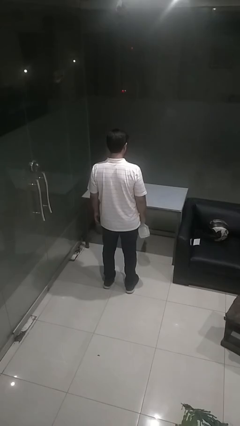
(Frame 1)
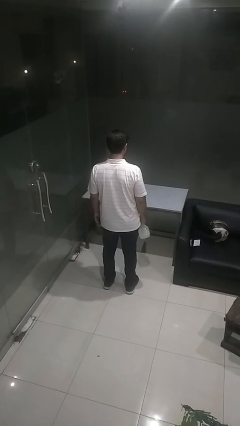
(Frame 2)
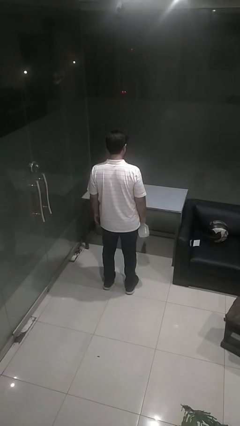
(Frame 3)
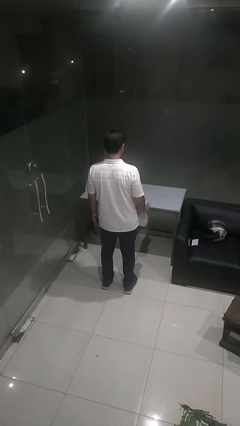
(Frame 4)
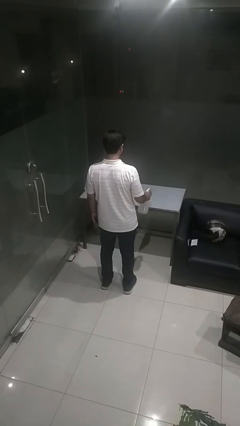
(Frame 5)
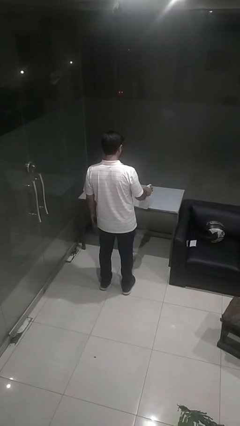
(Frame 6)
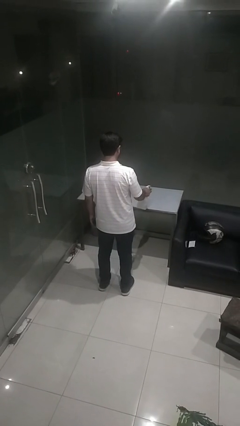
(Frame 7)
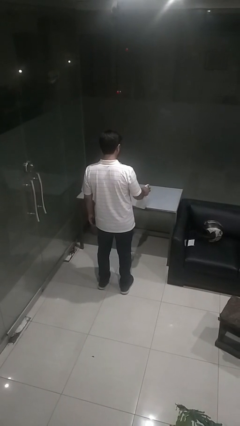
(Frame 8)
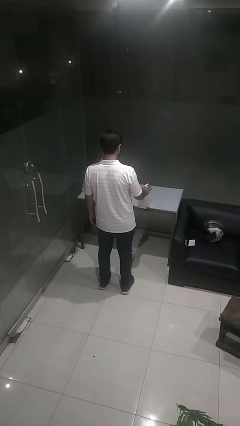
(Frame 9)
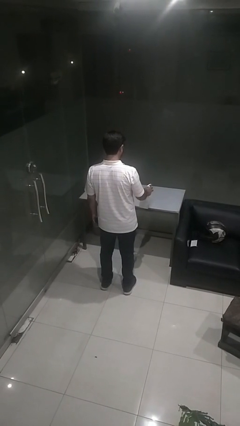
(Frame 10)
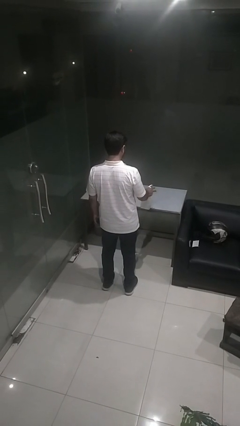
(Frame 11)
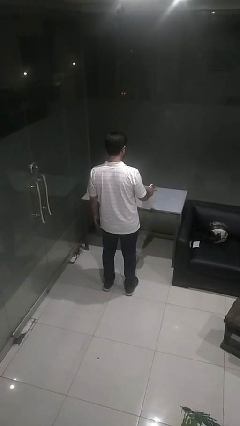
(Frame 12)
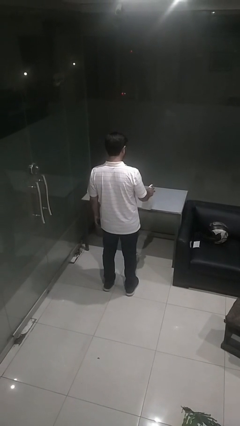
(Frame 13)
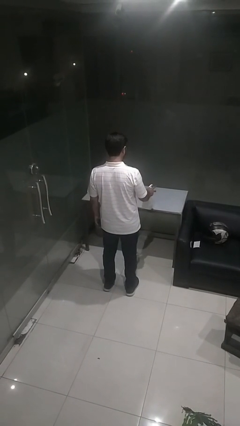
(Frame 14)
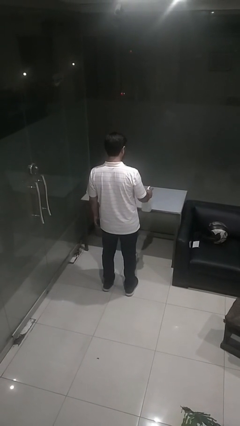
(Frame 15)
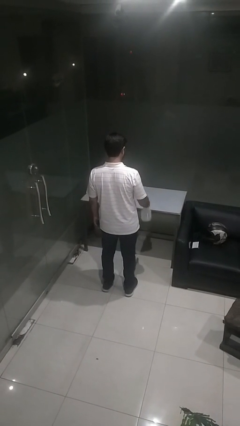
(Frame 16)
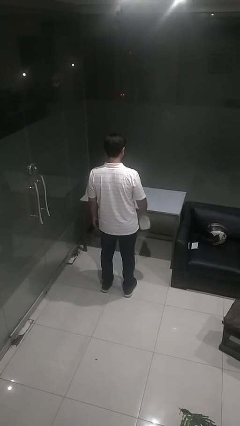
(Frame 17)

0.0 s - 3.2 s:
person sprays from bottle

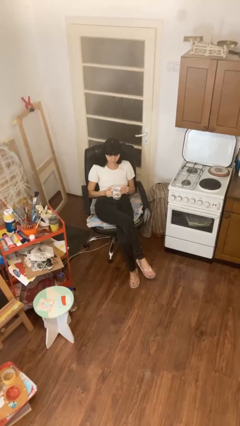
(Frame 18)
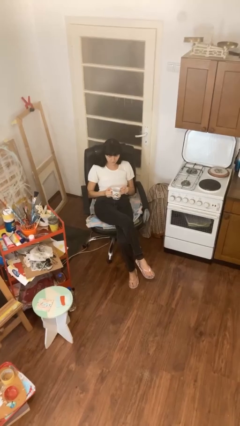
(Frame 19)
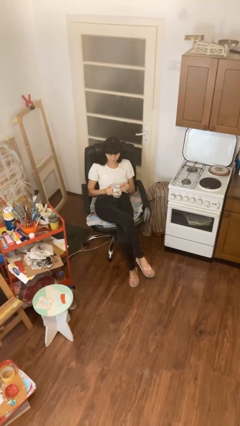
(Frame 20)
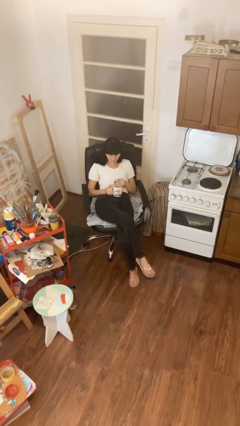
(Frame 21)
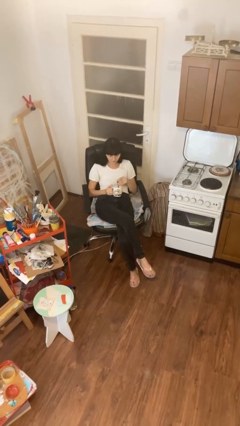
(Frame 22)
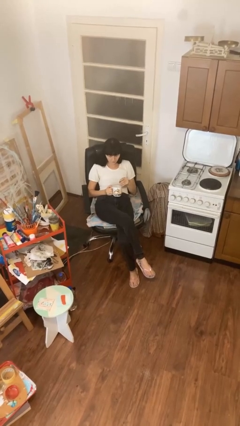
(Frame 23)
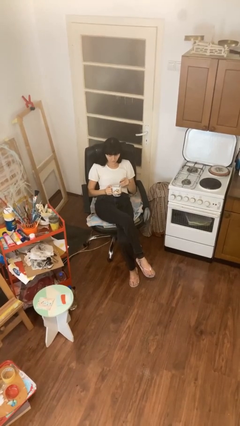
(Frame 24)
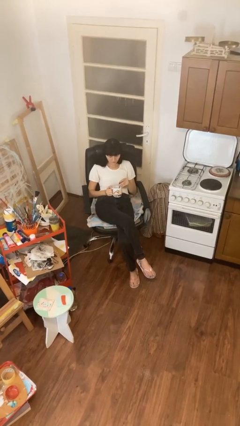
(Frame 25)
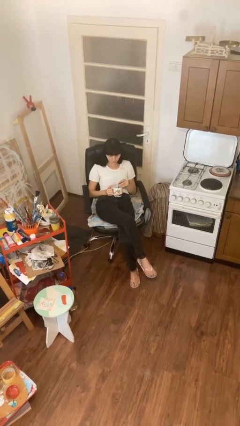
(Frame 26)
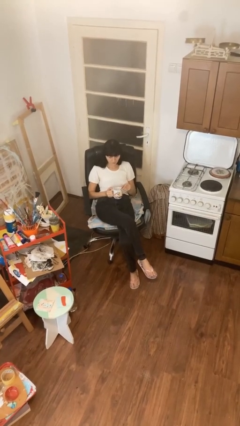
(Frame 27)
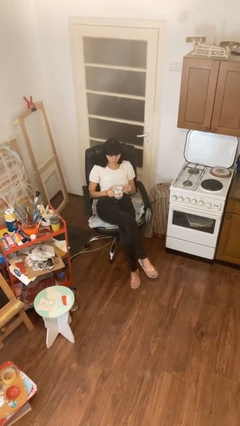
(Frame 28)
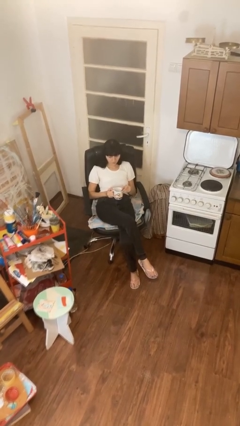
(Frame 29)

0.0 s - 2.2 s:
person stirs mug

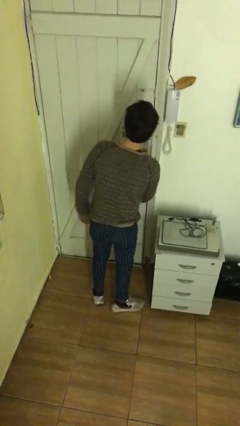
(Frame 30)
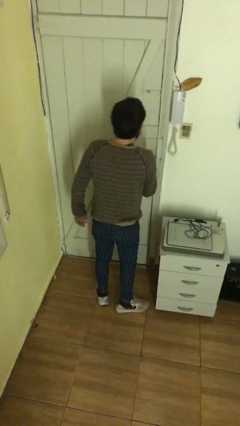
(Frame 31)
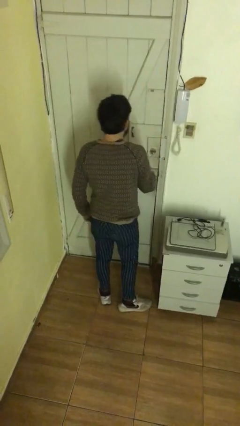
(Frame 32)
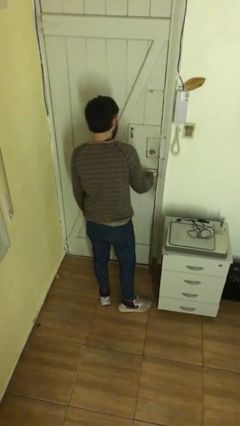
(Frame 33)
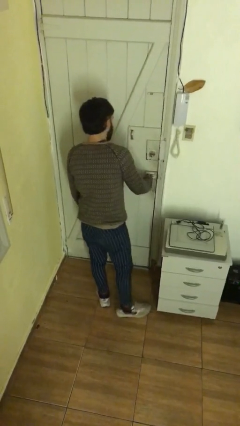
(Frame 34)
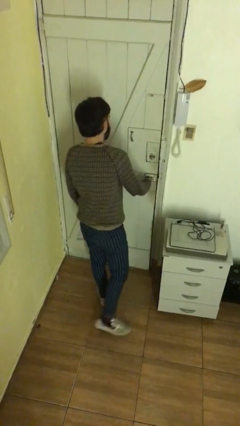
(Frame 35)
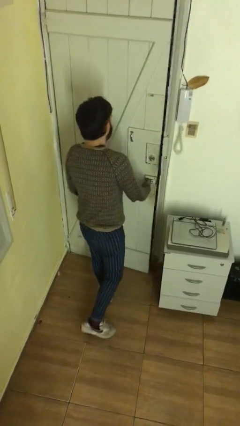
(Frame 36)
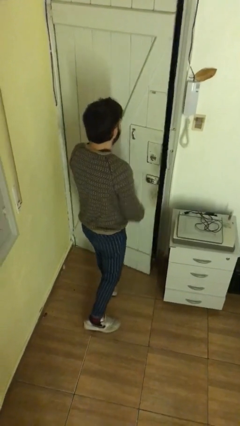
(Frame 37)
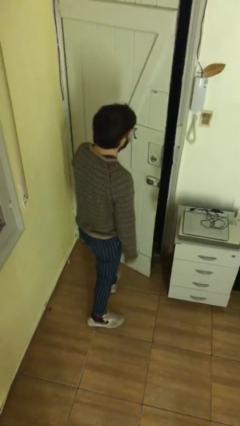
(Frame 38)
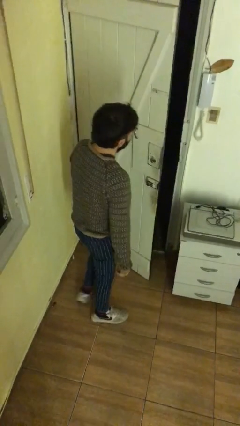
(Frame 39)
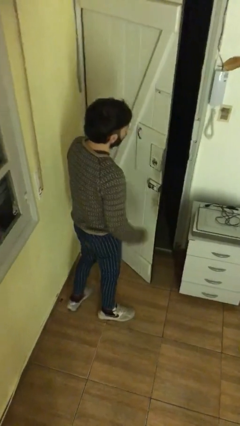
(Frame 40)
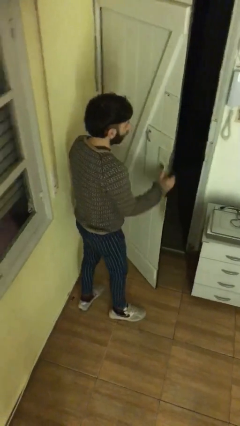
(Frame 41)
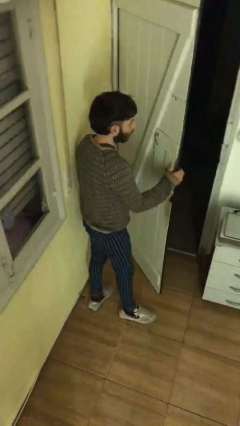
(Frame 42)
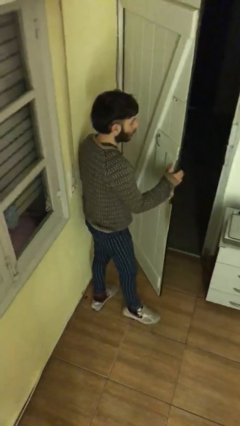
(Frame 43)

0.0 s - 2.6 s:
person opens facility door

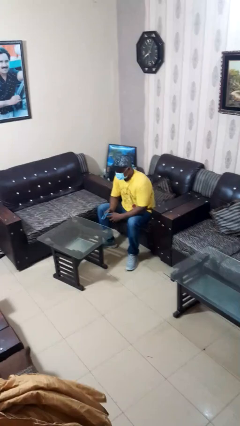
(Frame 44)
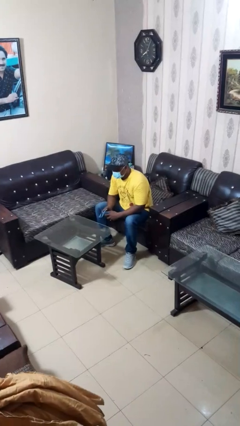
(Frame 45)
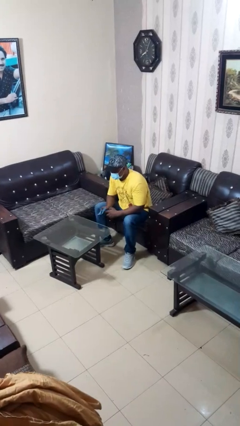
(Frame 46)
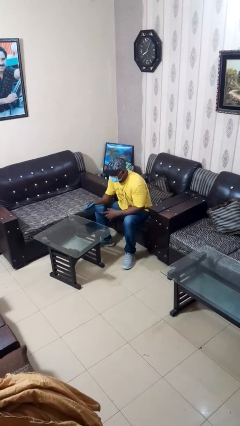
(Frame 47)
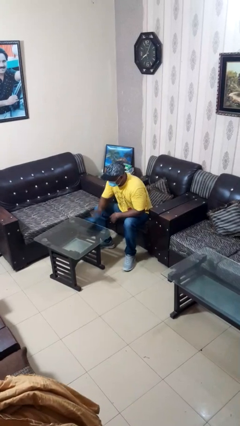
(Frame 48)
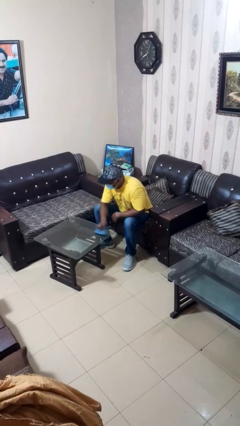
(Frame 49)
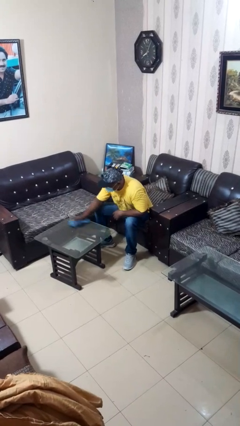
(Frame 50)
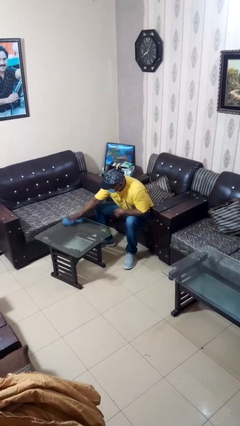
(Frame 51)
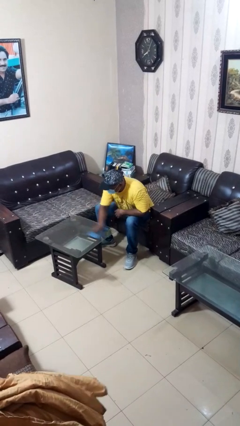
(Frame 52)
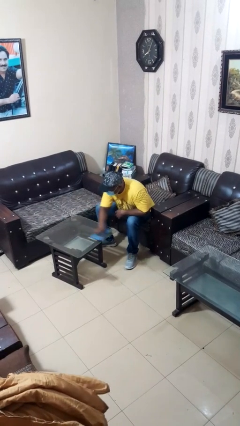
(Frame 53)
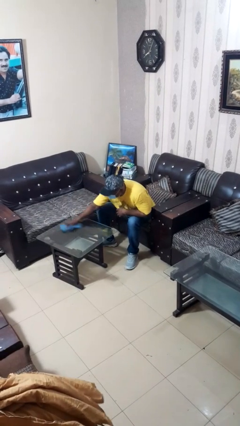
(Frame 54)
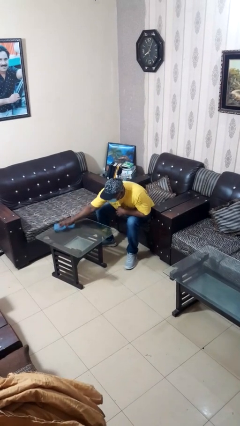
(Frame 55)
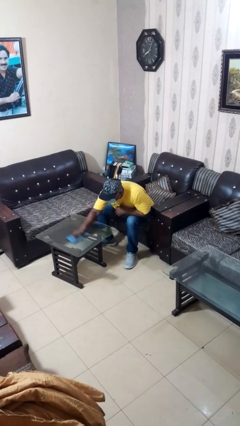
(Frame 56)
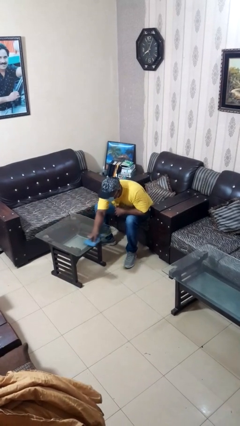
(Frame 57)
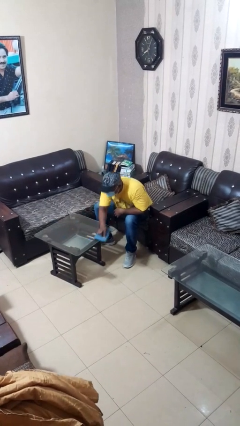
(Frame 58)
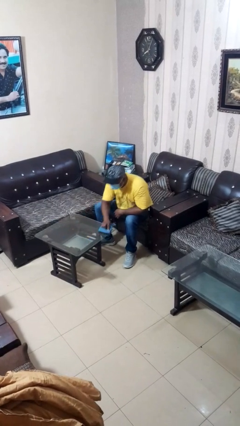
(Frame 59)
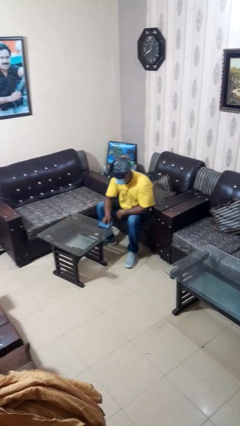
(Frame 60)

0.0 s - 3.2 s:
person cleans table with rag

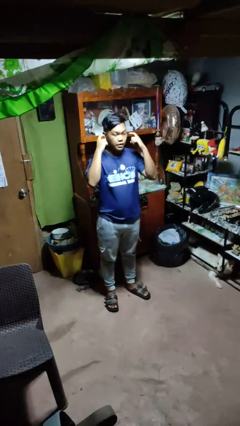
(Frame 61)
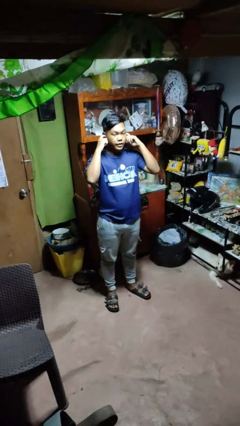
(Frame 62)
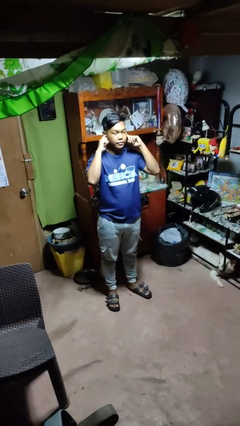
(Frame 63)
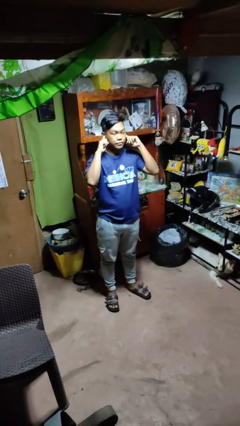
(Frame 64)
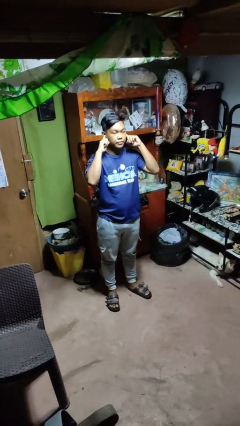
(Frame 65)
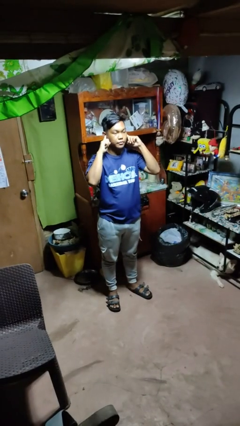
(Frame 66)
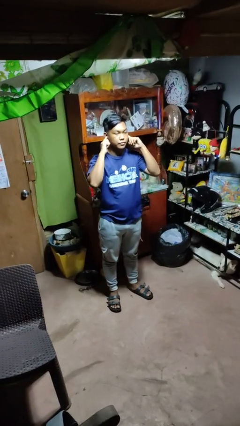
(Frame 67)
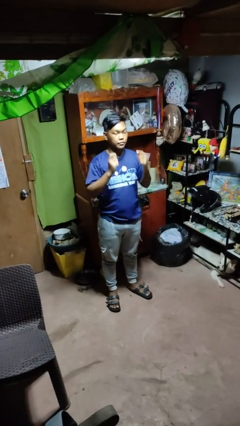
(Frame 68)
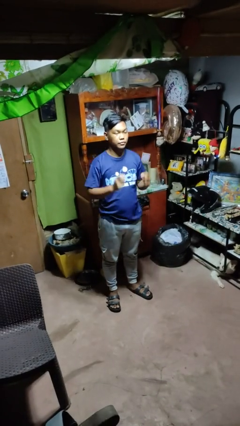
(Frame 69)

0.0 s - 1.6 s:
person puts fingers in ear

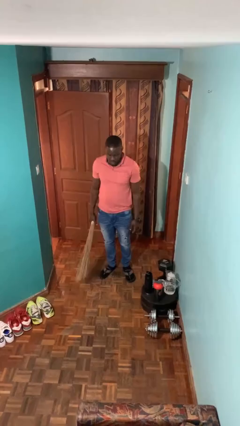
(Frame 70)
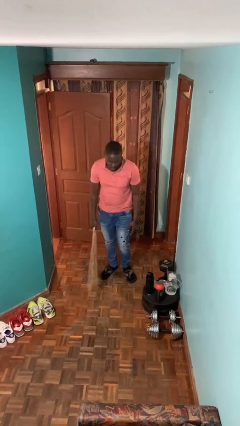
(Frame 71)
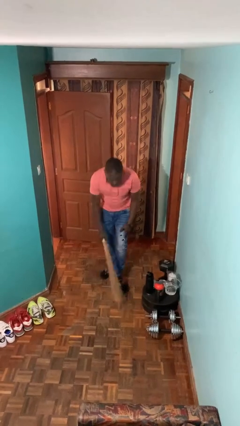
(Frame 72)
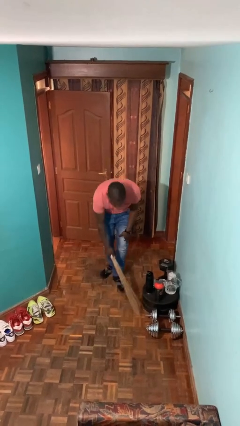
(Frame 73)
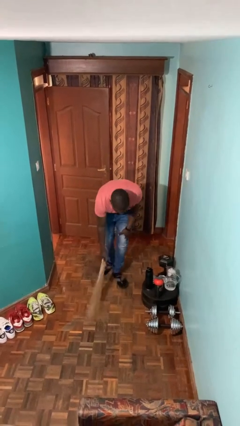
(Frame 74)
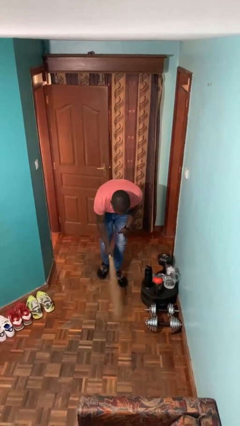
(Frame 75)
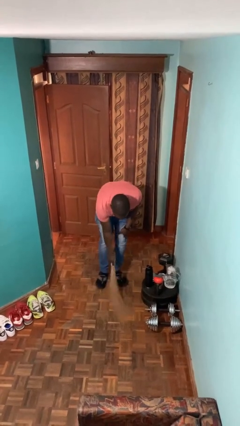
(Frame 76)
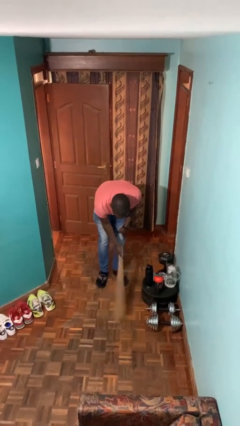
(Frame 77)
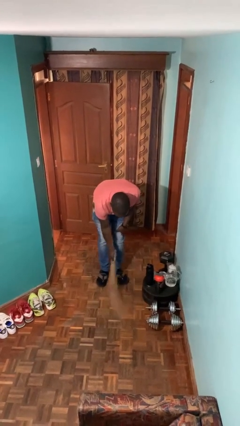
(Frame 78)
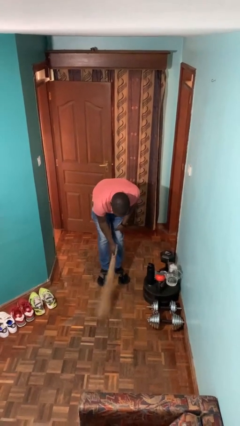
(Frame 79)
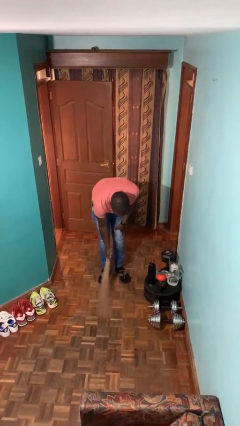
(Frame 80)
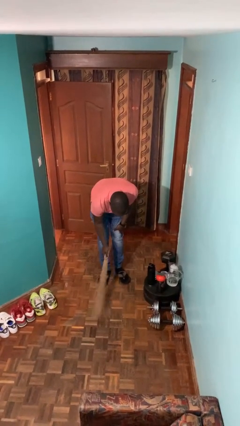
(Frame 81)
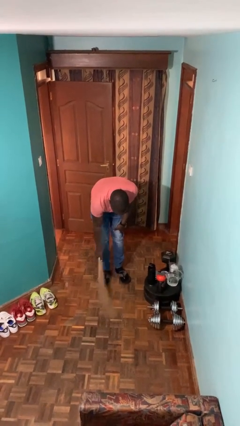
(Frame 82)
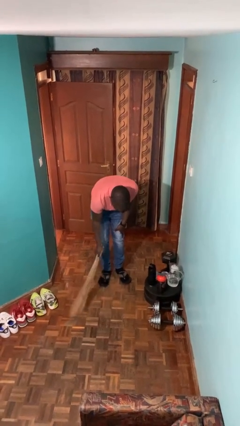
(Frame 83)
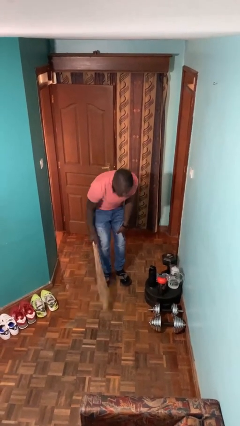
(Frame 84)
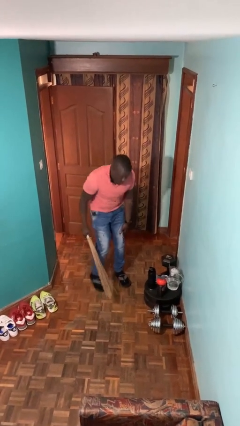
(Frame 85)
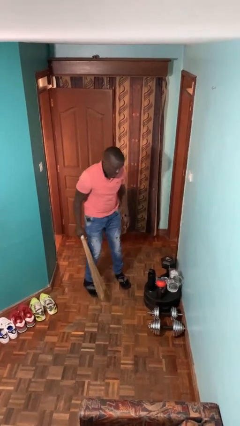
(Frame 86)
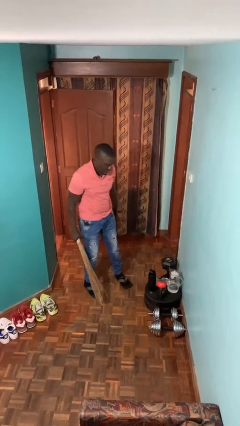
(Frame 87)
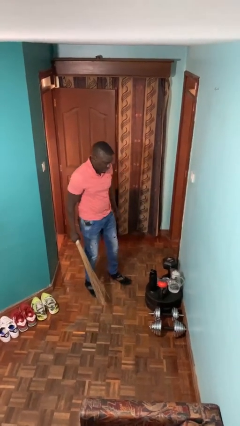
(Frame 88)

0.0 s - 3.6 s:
person sweeps floor

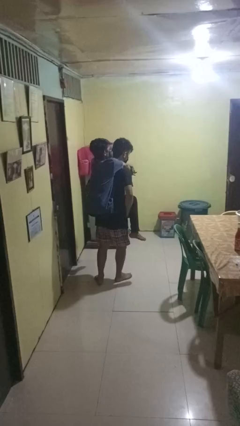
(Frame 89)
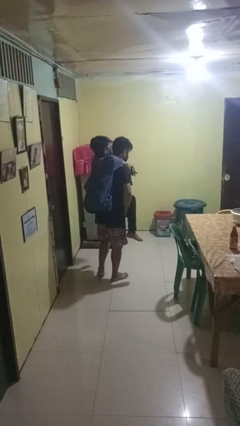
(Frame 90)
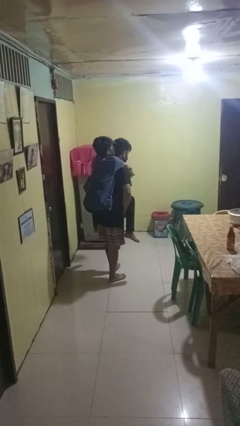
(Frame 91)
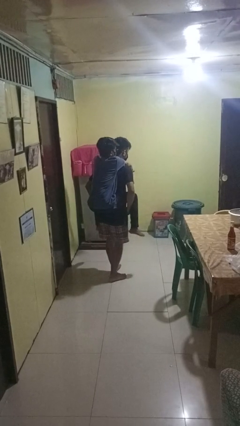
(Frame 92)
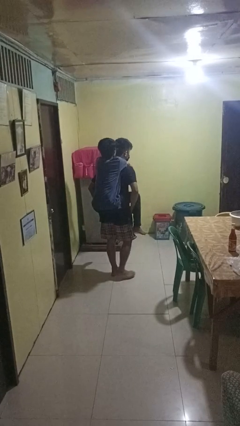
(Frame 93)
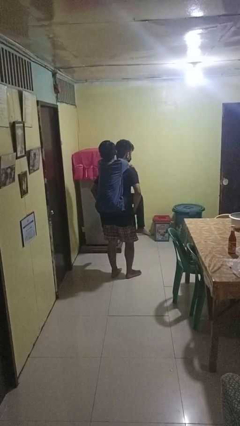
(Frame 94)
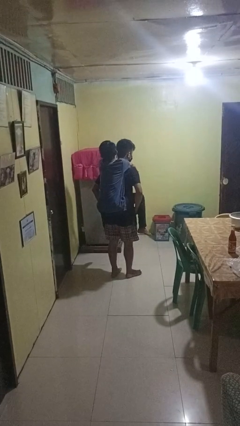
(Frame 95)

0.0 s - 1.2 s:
person carries person on back
